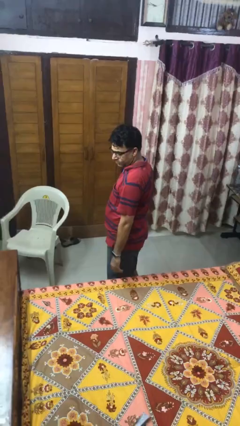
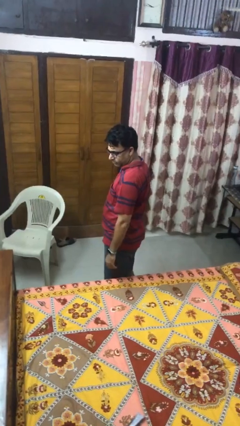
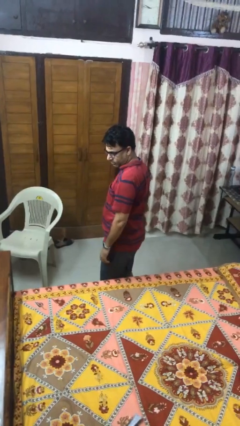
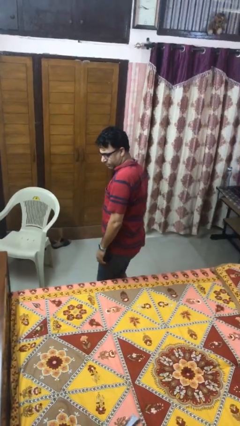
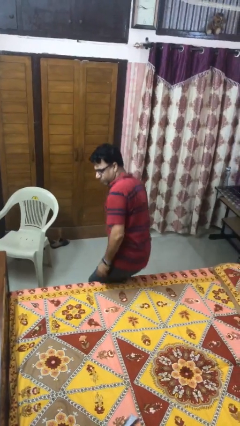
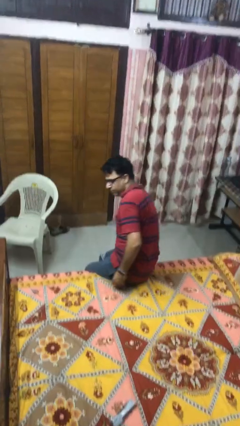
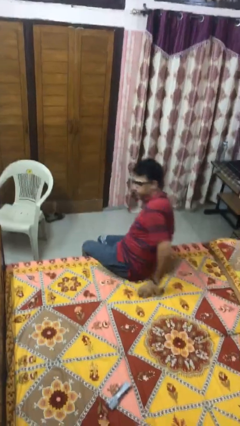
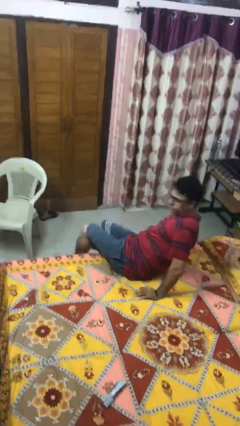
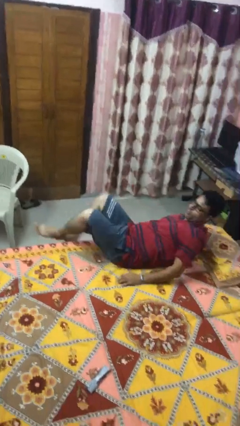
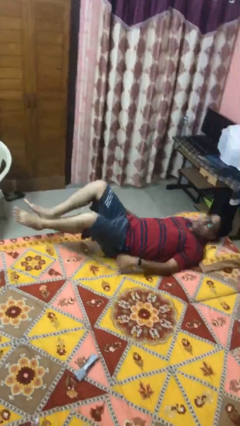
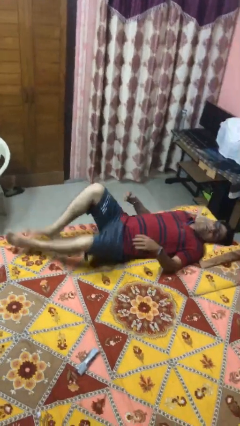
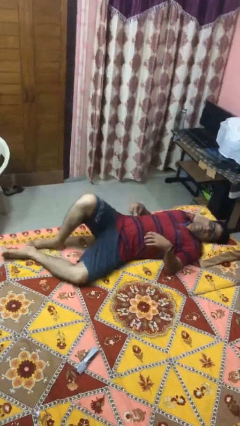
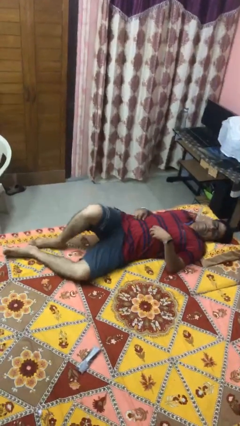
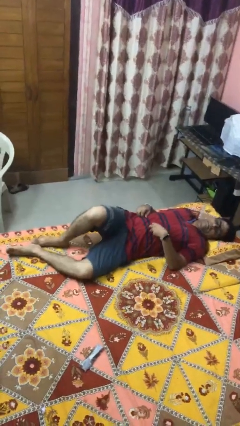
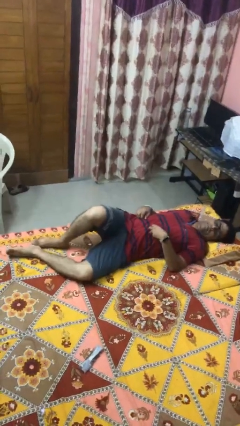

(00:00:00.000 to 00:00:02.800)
person lies down on bed

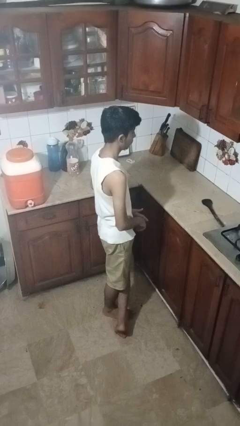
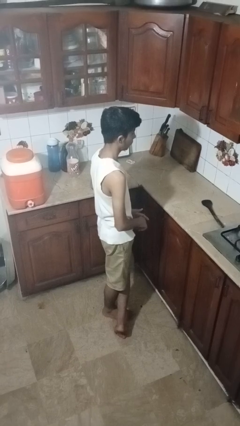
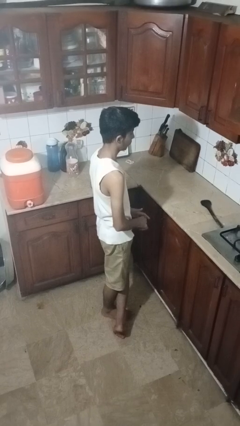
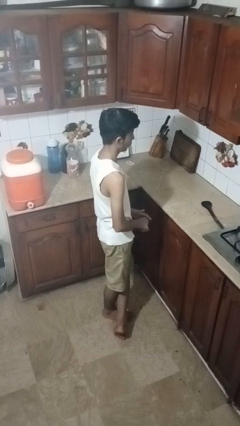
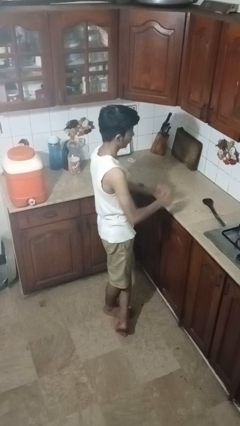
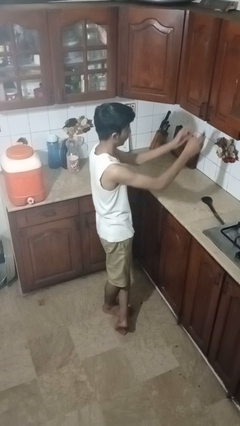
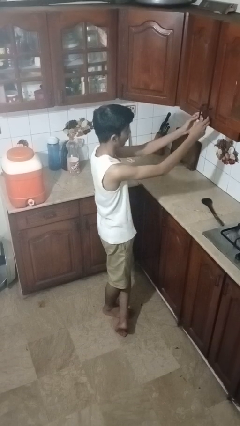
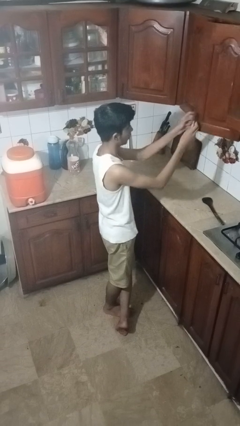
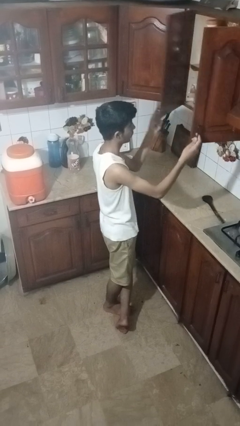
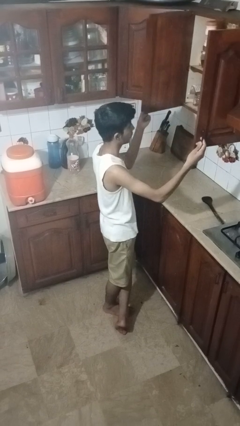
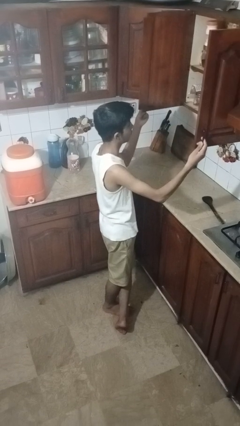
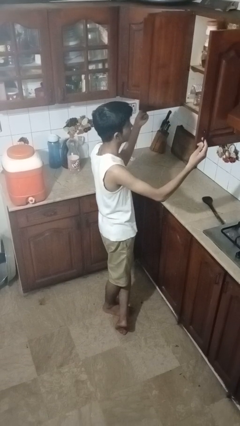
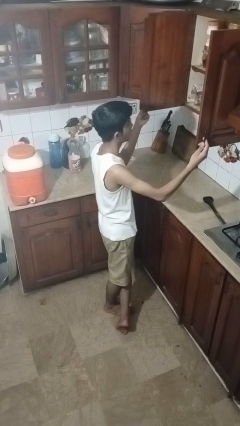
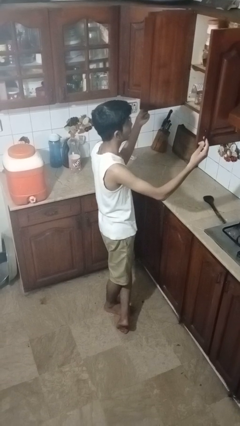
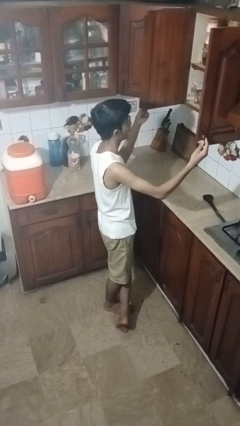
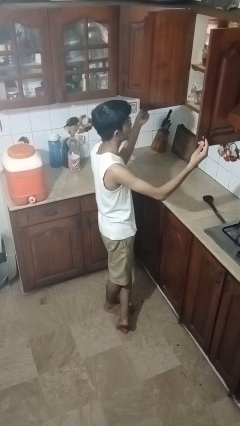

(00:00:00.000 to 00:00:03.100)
person opens cabinet

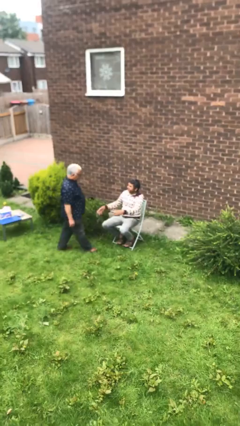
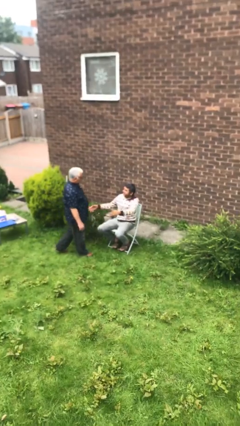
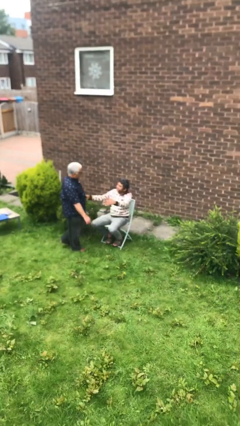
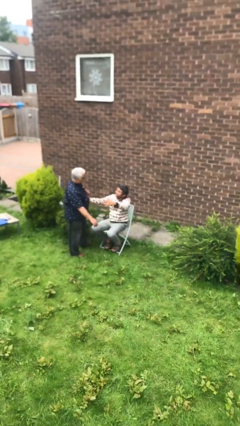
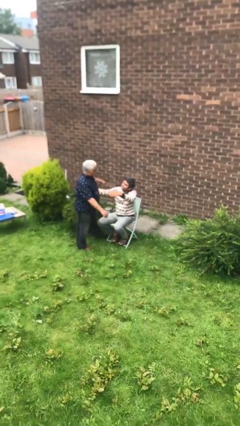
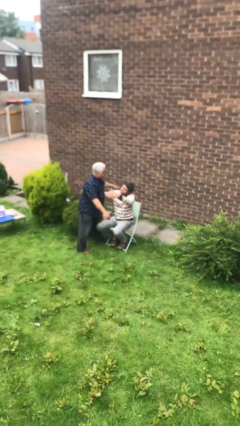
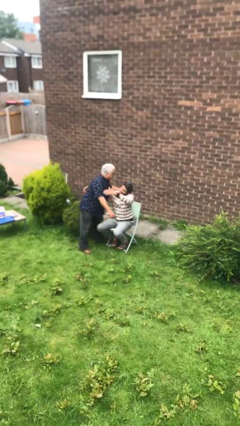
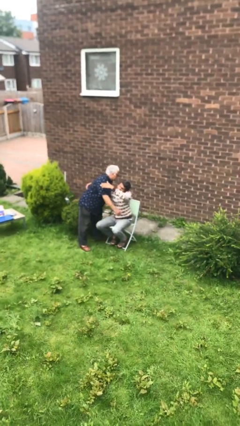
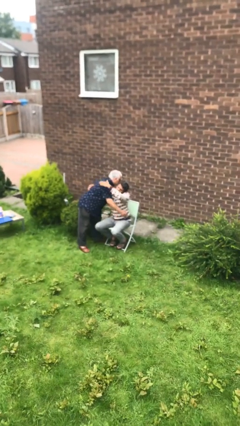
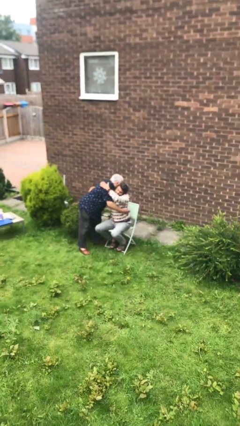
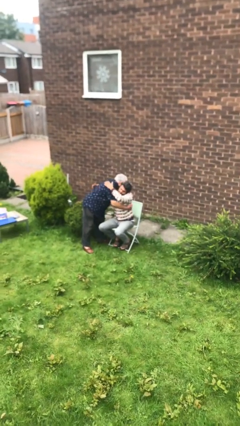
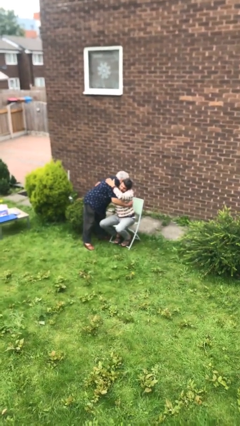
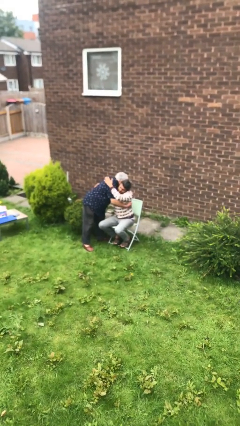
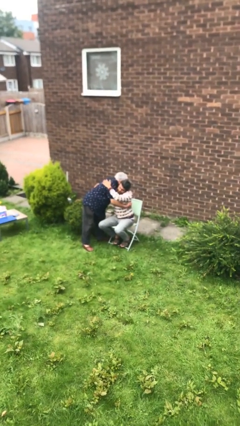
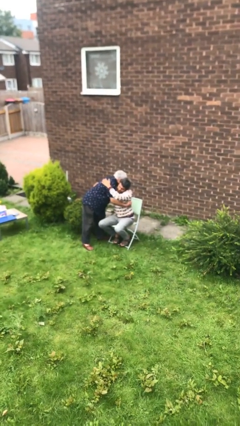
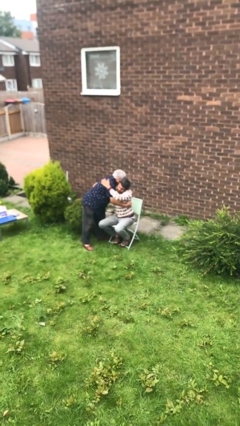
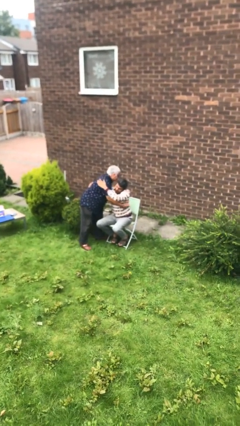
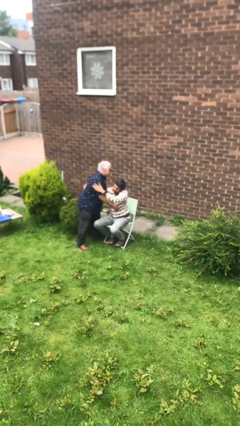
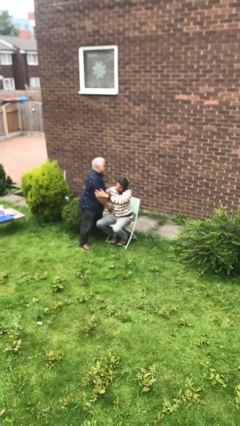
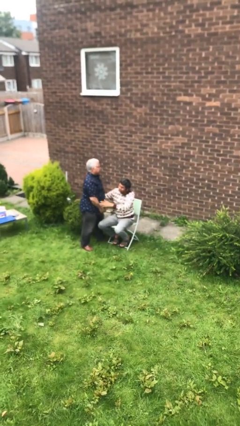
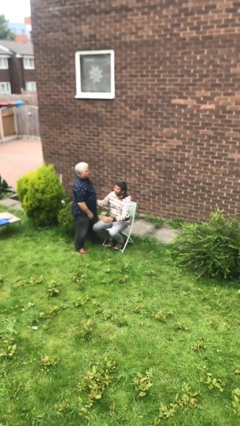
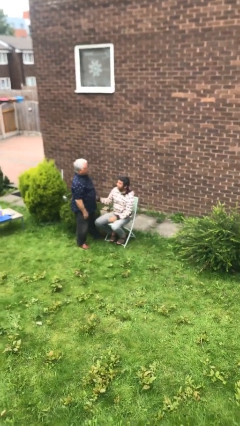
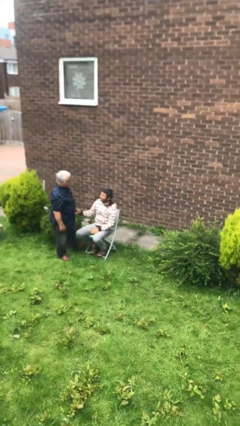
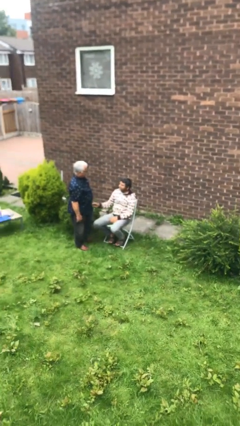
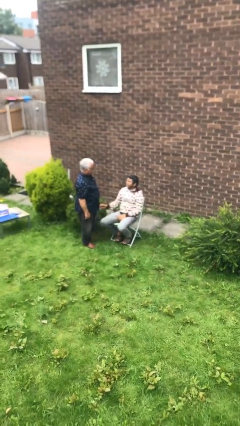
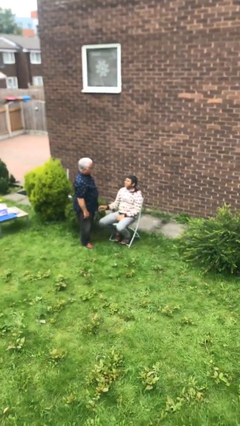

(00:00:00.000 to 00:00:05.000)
person embraces person

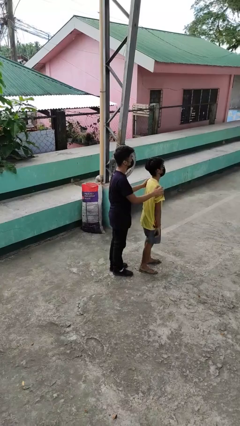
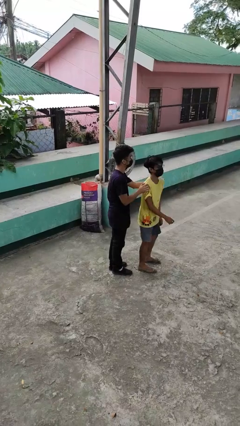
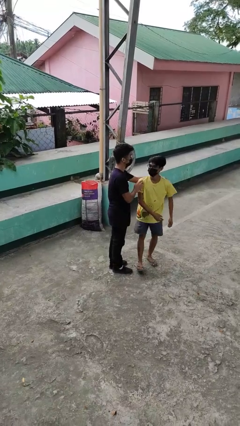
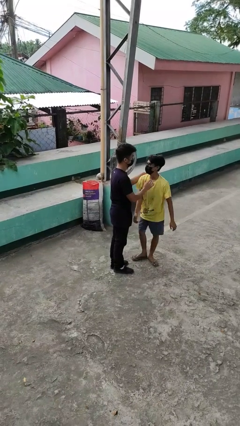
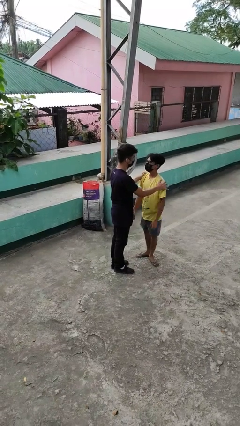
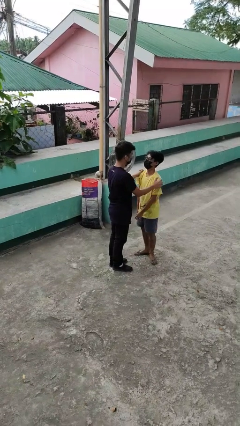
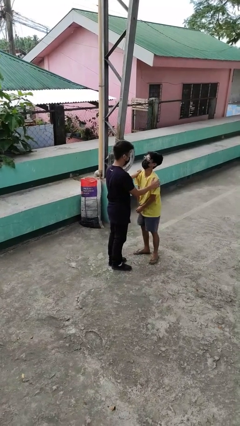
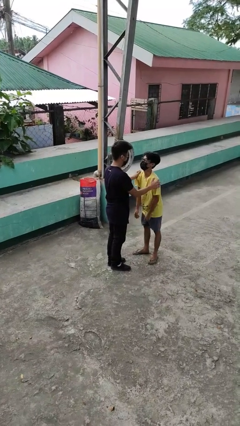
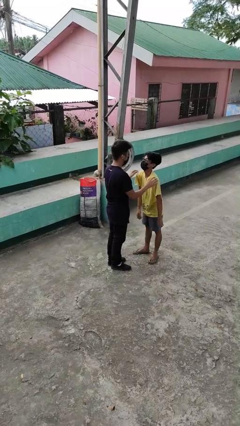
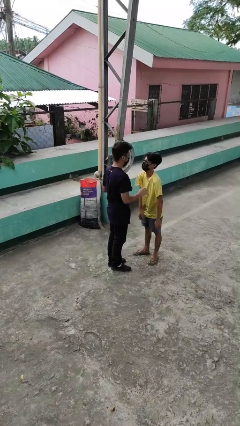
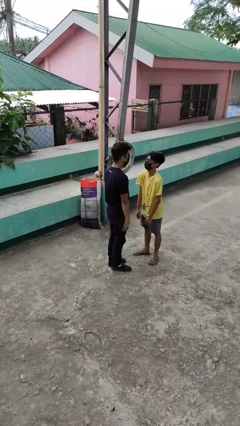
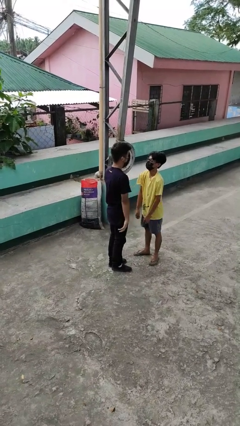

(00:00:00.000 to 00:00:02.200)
person spins person around

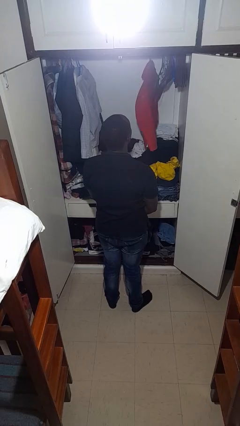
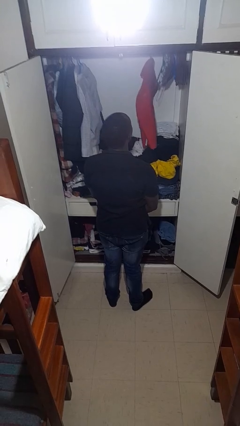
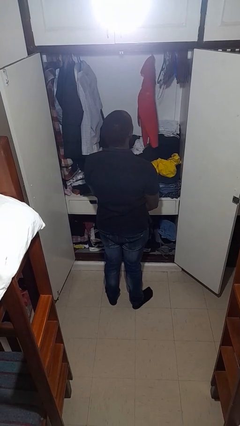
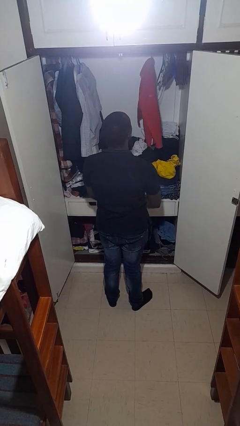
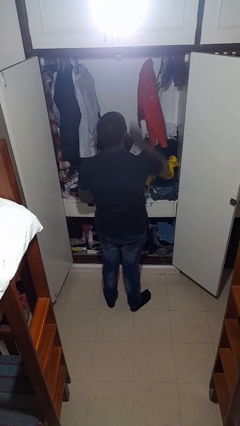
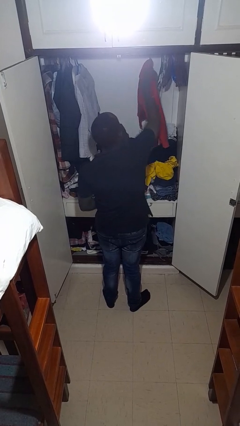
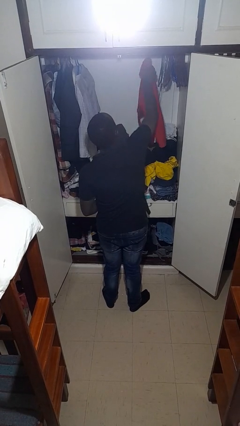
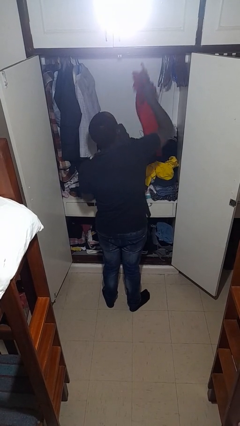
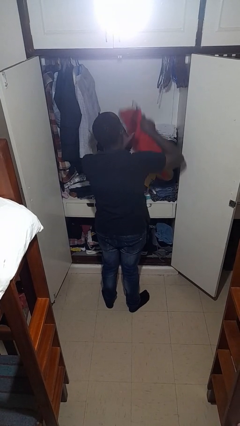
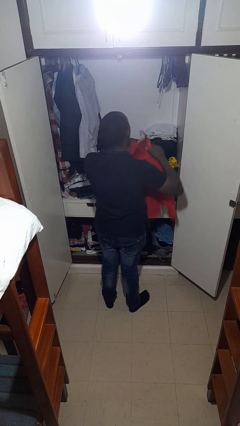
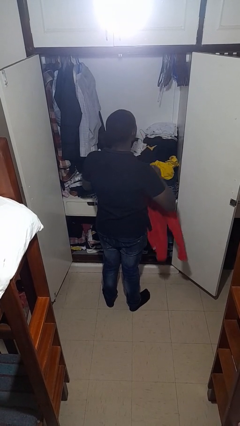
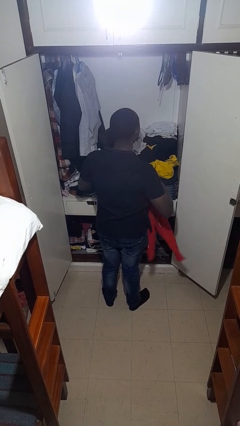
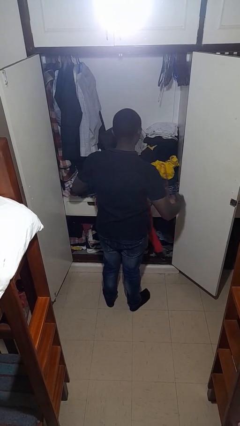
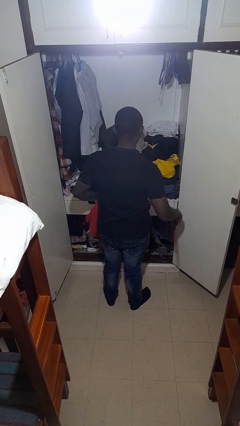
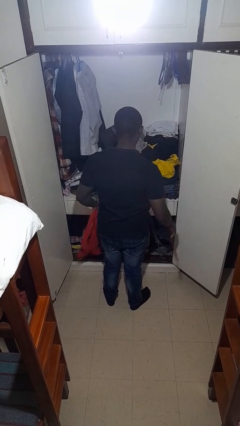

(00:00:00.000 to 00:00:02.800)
person takes clothes from closet

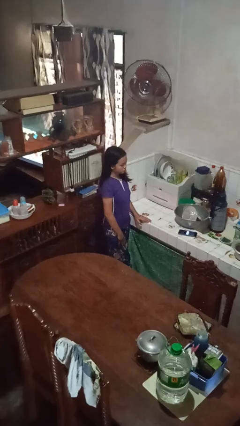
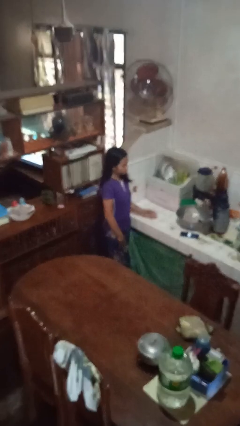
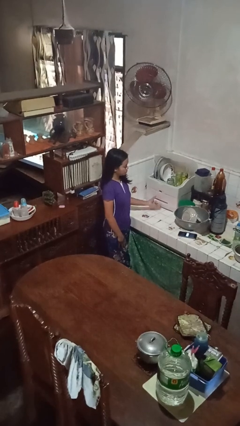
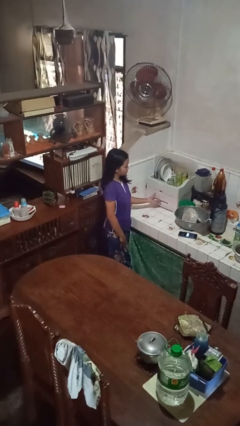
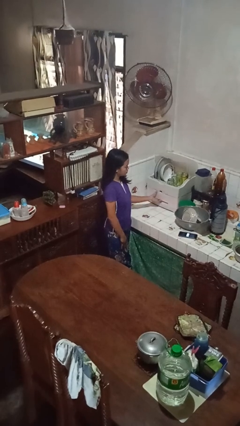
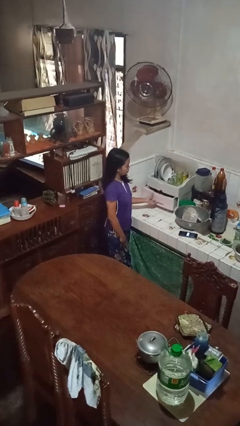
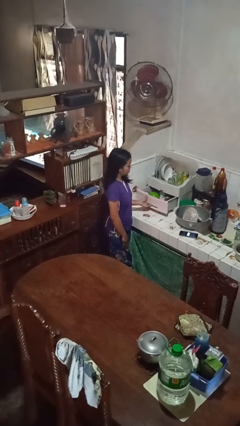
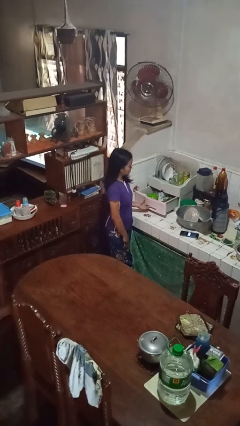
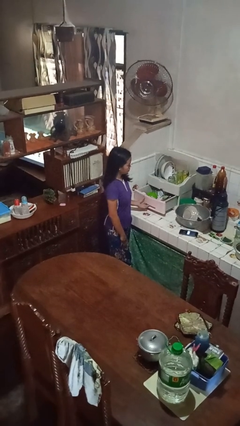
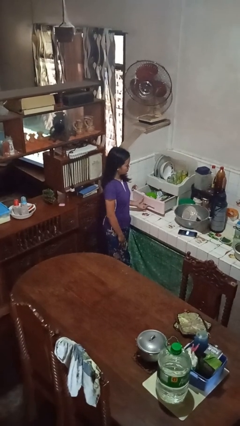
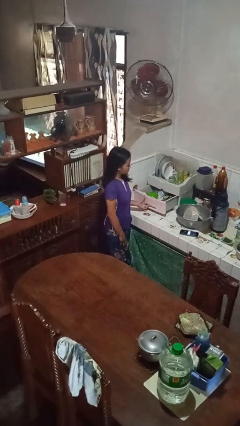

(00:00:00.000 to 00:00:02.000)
person opens kitchen drawer
